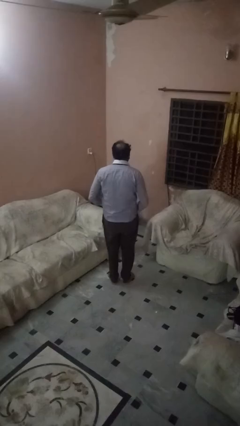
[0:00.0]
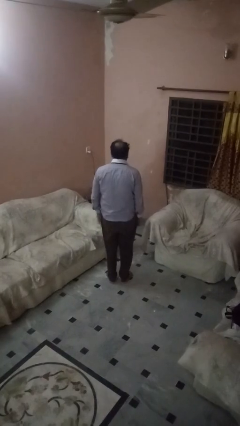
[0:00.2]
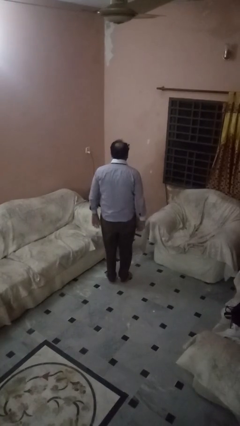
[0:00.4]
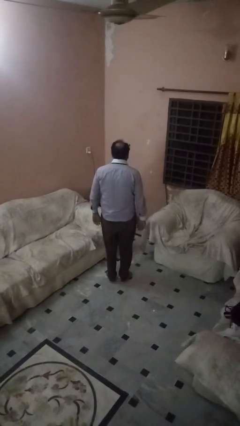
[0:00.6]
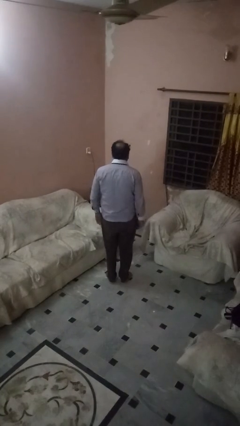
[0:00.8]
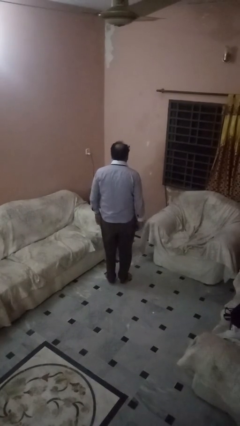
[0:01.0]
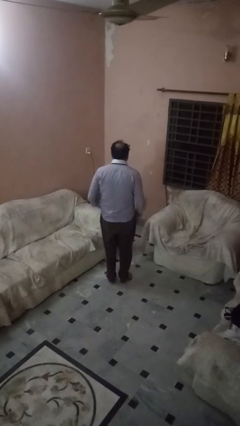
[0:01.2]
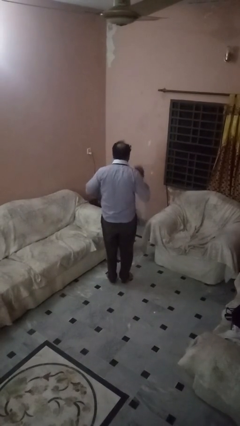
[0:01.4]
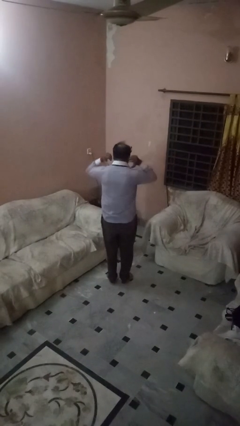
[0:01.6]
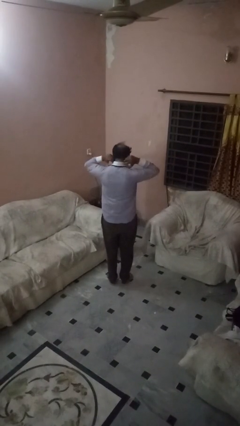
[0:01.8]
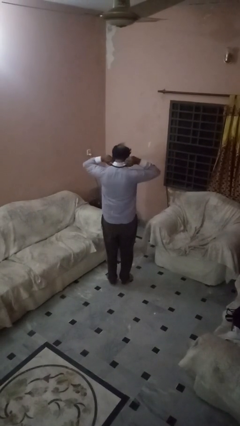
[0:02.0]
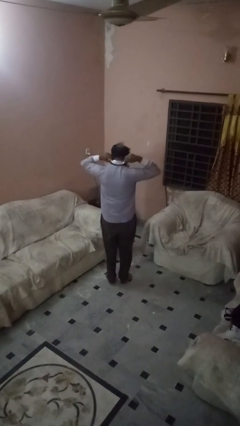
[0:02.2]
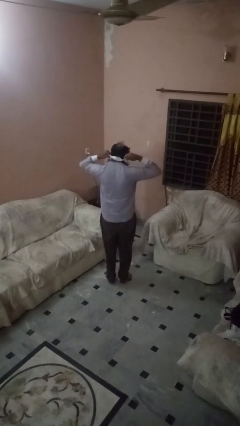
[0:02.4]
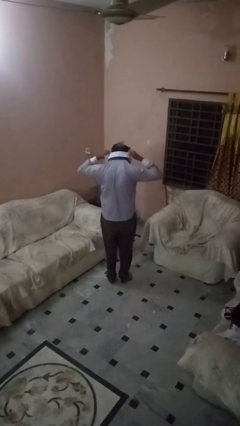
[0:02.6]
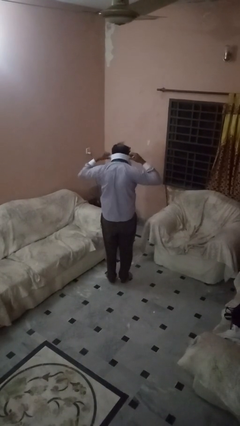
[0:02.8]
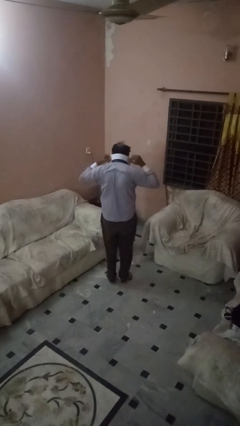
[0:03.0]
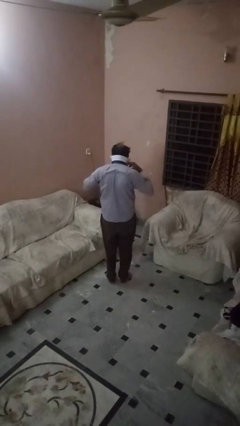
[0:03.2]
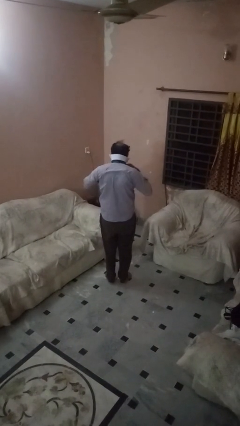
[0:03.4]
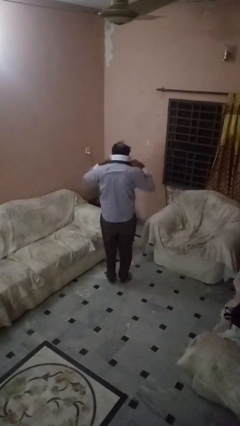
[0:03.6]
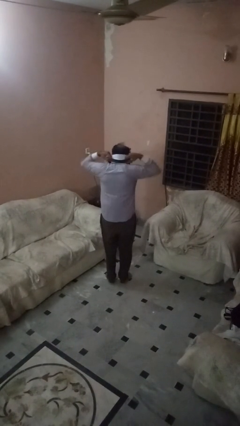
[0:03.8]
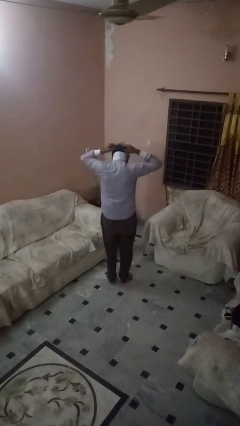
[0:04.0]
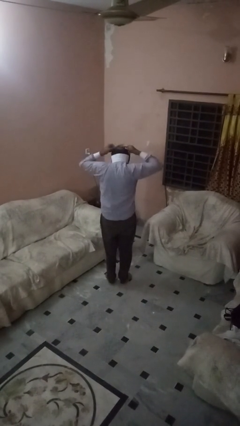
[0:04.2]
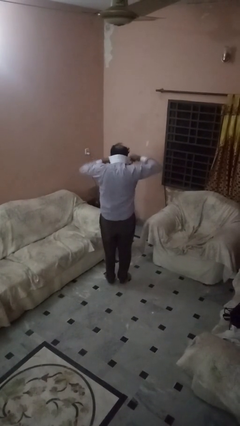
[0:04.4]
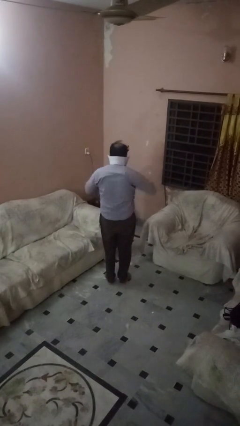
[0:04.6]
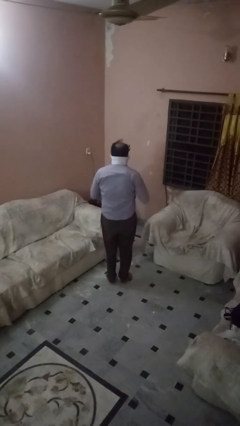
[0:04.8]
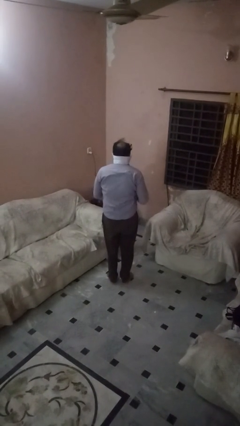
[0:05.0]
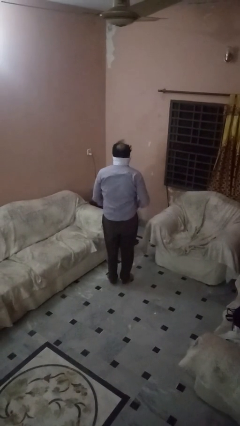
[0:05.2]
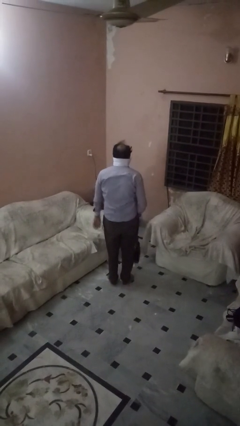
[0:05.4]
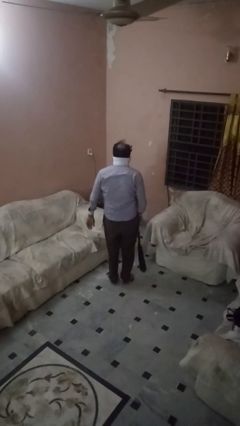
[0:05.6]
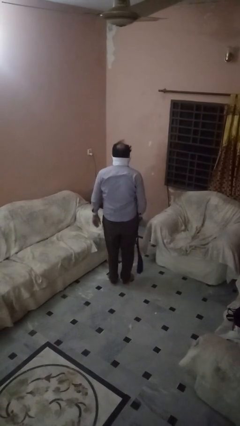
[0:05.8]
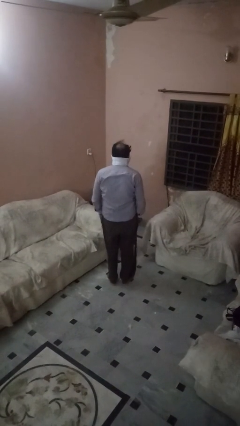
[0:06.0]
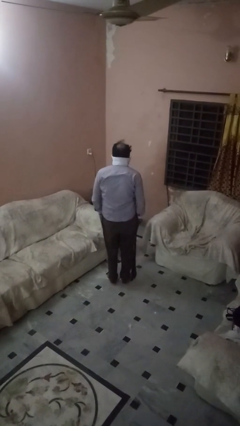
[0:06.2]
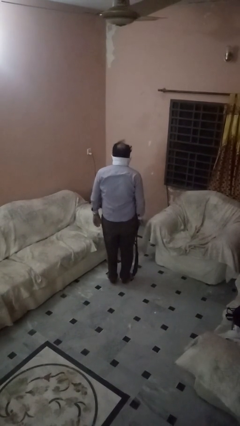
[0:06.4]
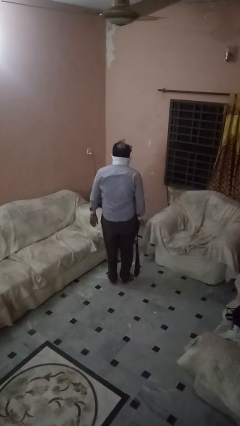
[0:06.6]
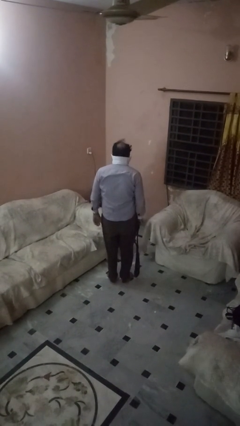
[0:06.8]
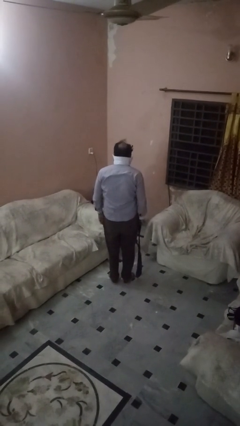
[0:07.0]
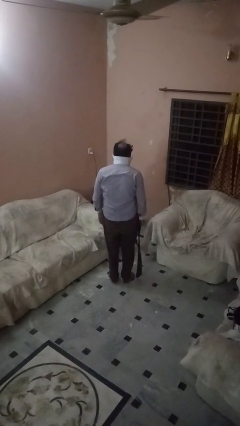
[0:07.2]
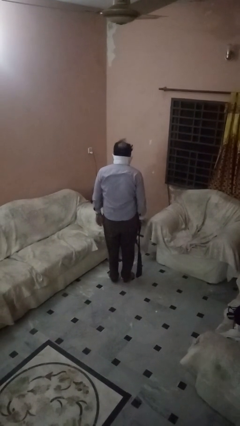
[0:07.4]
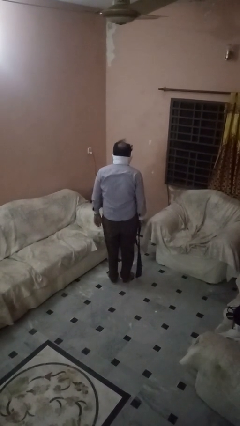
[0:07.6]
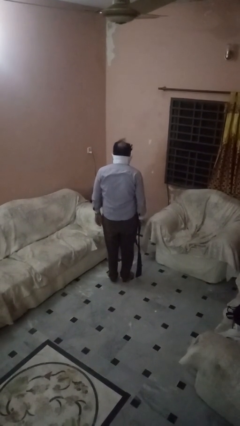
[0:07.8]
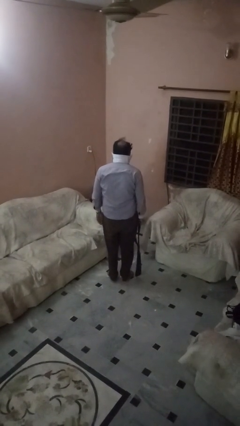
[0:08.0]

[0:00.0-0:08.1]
person takes off necktie

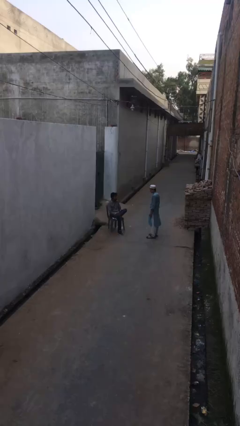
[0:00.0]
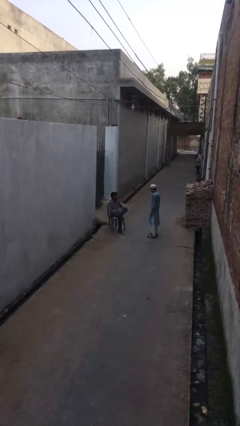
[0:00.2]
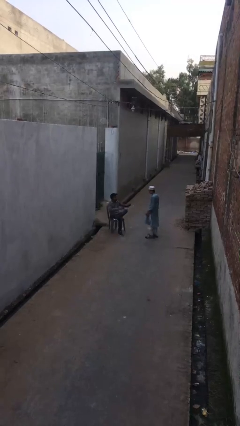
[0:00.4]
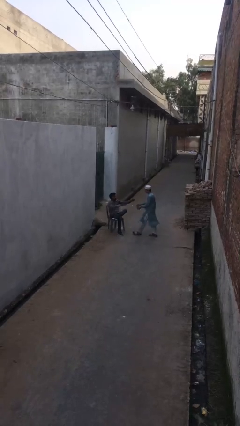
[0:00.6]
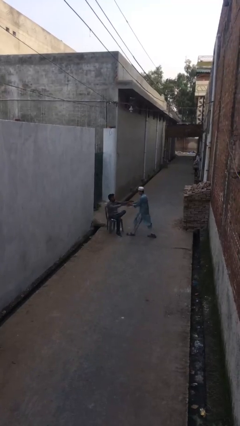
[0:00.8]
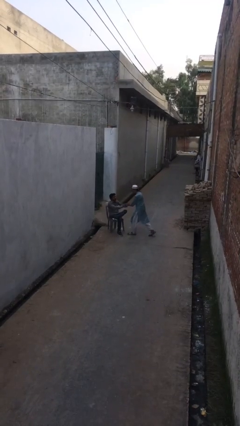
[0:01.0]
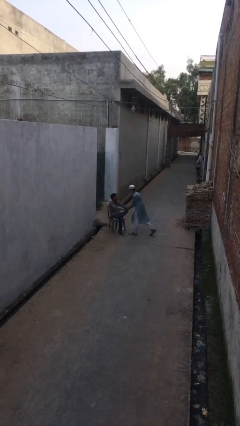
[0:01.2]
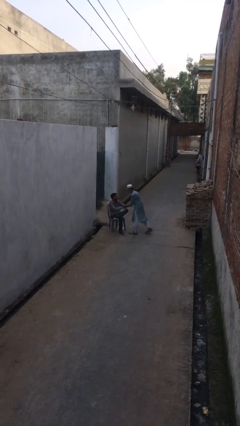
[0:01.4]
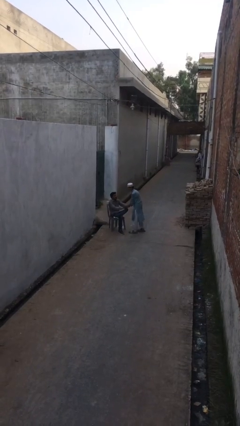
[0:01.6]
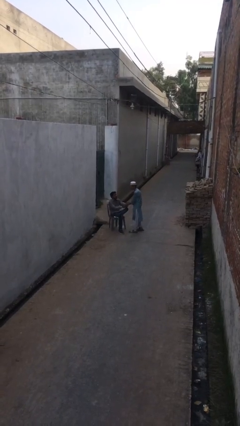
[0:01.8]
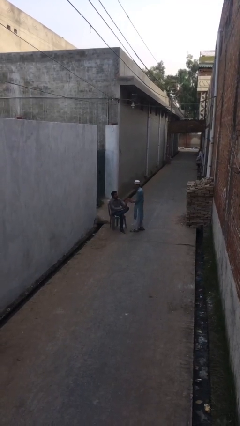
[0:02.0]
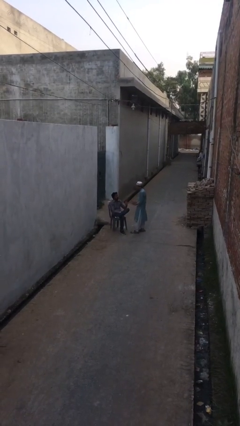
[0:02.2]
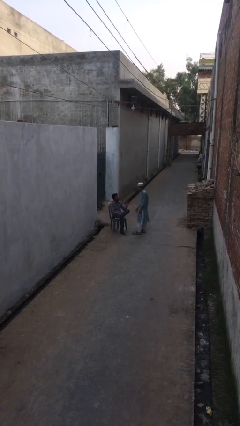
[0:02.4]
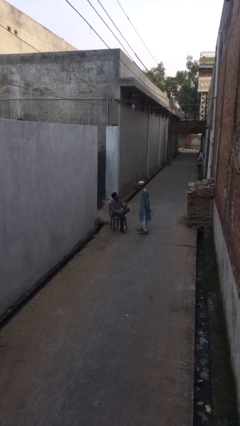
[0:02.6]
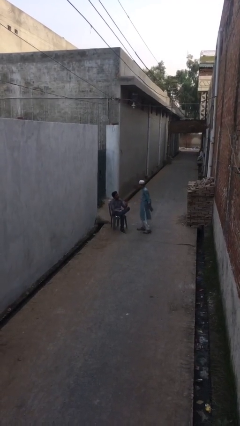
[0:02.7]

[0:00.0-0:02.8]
person shakes hand

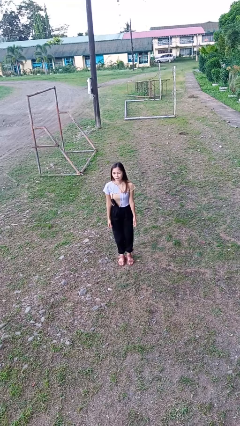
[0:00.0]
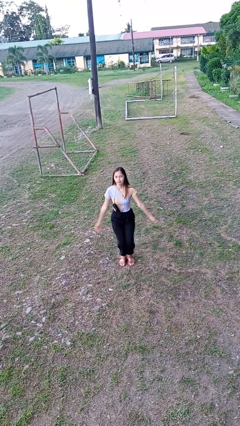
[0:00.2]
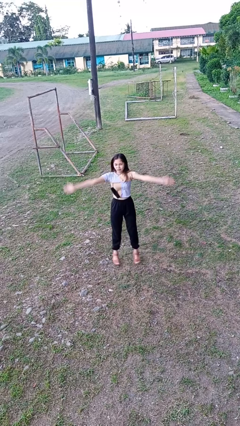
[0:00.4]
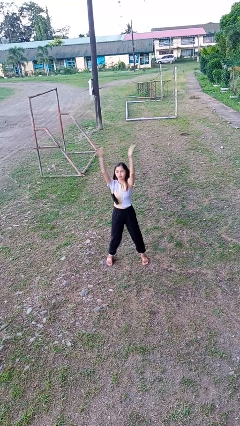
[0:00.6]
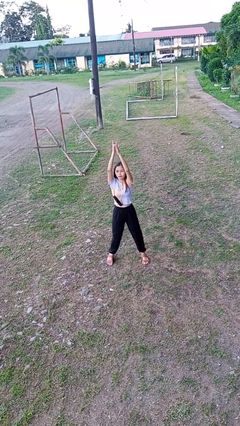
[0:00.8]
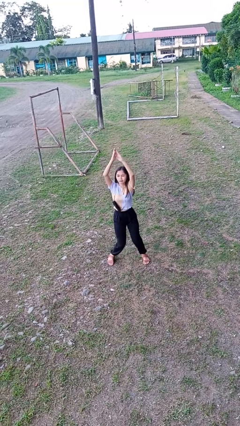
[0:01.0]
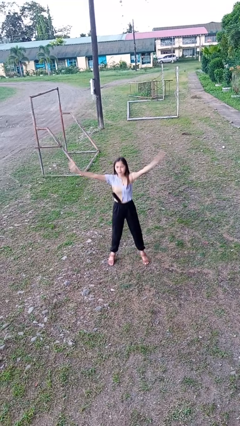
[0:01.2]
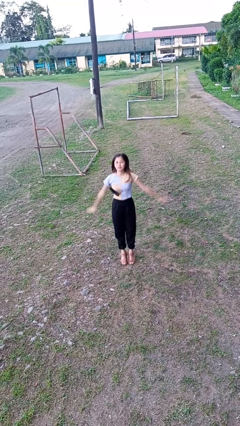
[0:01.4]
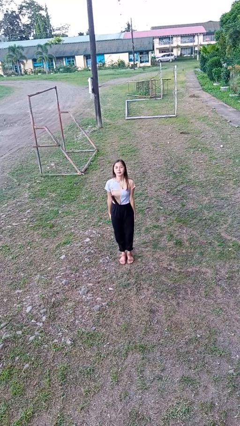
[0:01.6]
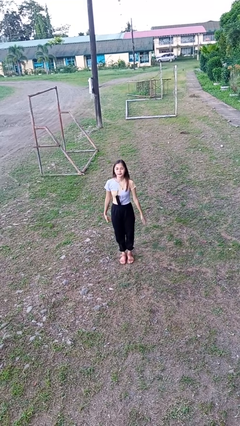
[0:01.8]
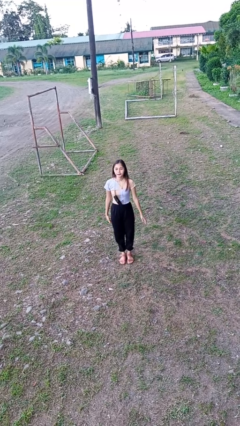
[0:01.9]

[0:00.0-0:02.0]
person exercises with jumping jacks

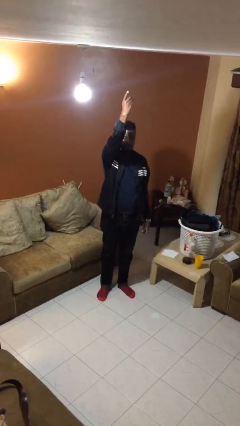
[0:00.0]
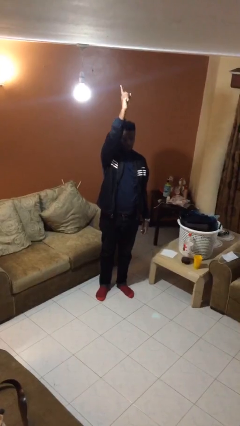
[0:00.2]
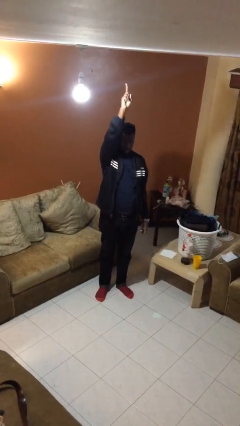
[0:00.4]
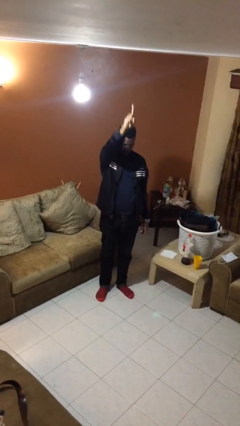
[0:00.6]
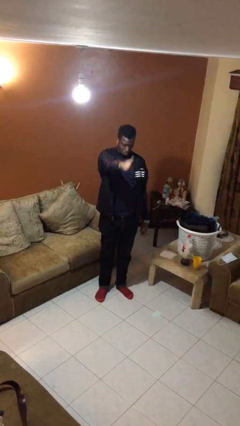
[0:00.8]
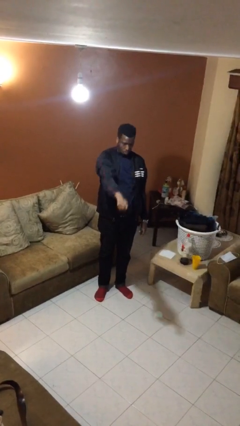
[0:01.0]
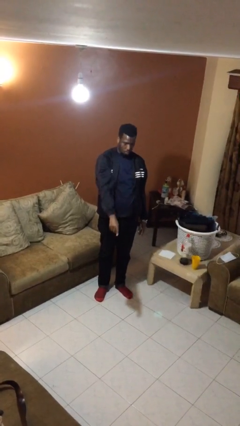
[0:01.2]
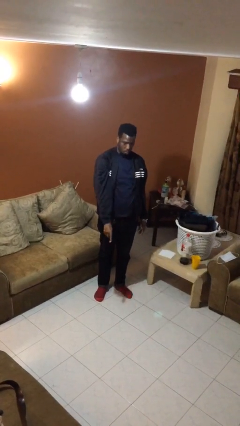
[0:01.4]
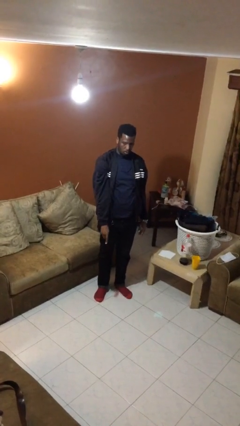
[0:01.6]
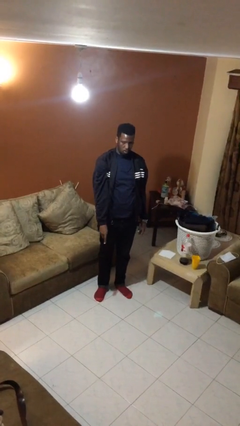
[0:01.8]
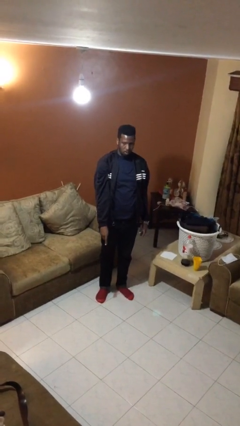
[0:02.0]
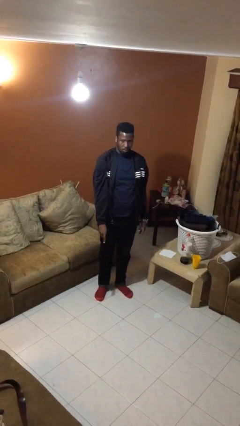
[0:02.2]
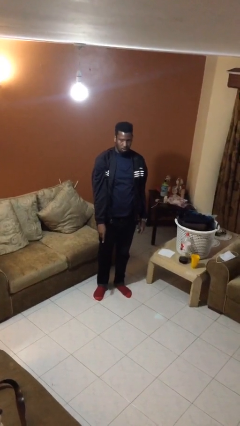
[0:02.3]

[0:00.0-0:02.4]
person gestures swipe down

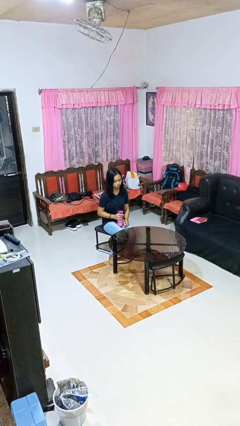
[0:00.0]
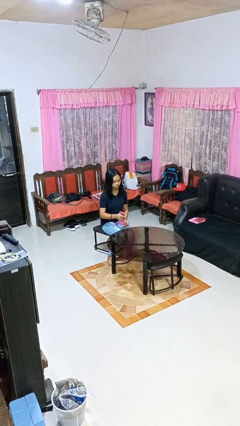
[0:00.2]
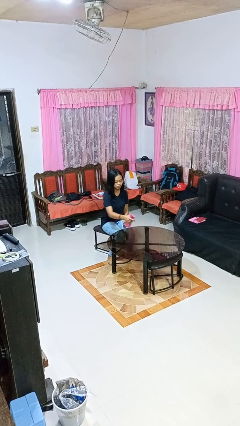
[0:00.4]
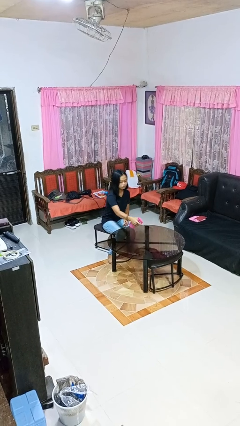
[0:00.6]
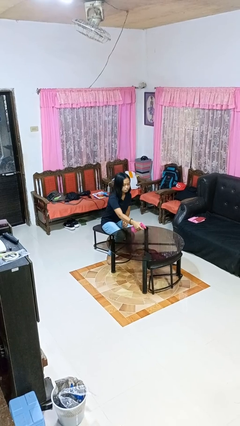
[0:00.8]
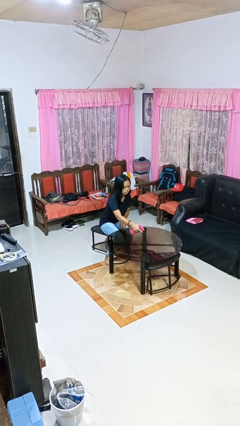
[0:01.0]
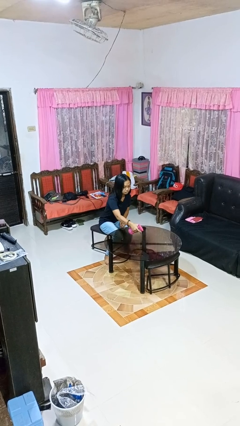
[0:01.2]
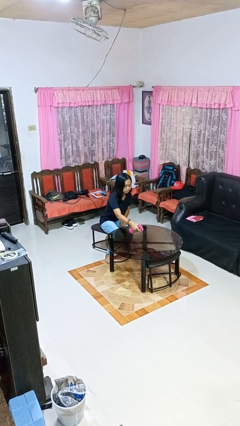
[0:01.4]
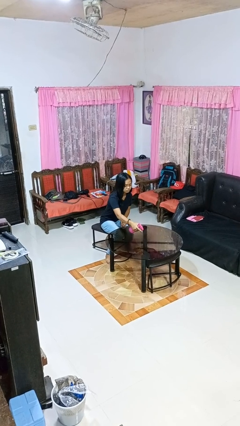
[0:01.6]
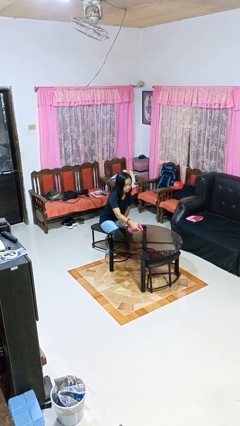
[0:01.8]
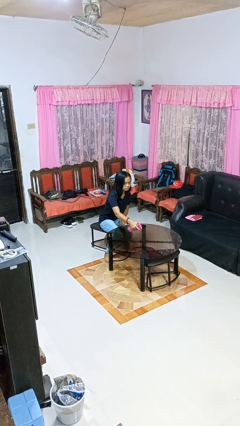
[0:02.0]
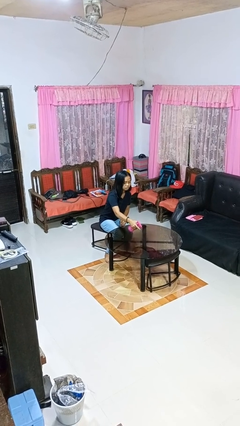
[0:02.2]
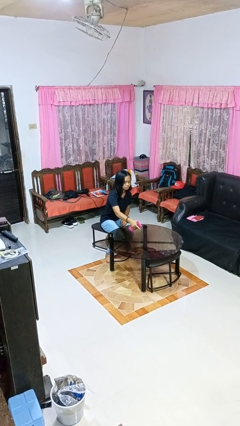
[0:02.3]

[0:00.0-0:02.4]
person sprays from bottle
